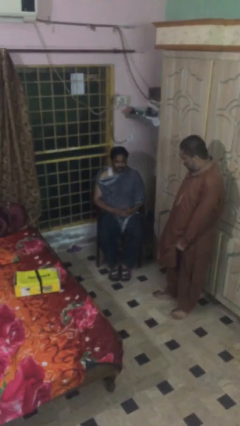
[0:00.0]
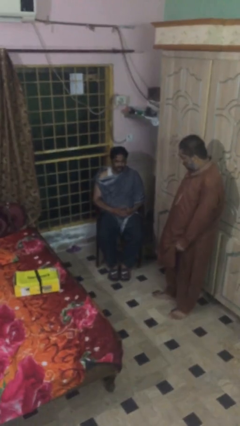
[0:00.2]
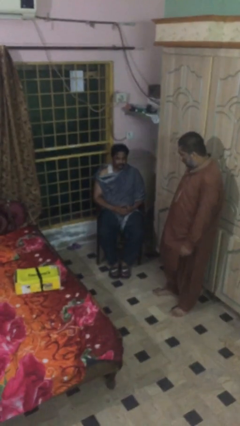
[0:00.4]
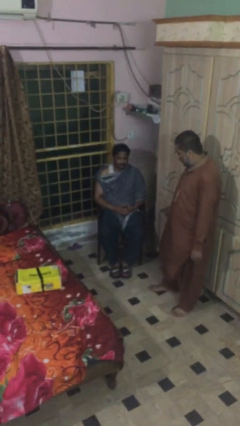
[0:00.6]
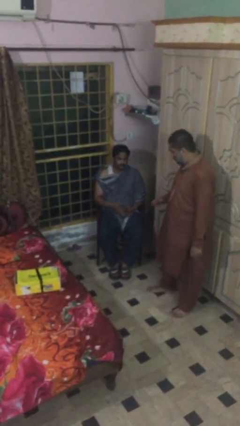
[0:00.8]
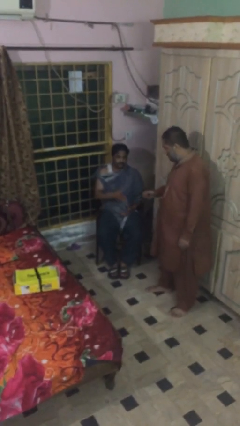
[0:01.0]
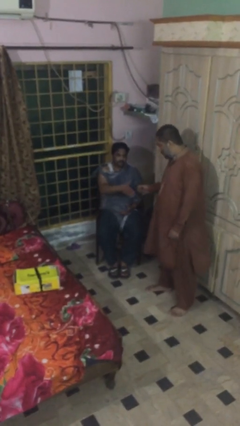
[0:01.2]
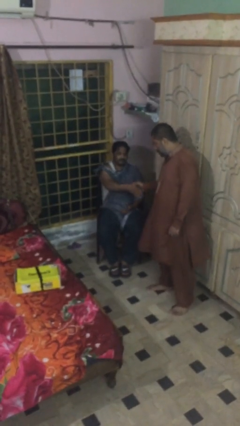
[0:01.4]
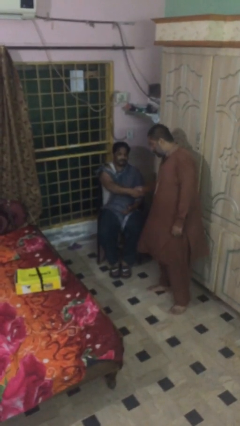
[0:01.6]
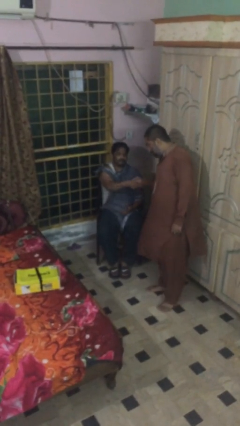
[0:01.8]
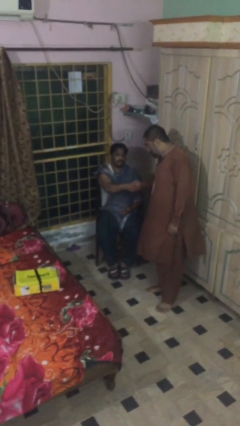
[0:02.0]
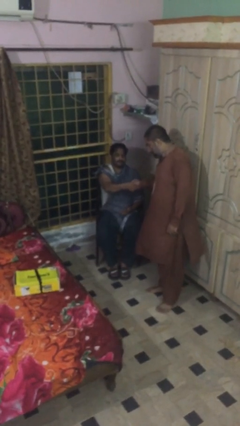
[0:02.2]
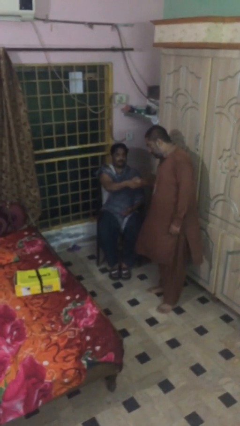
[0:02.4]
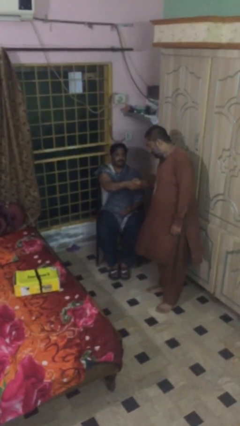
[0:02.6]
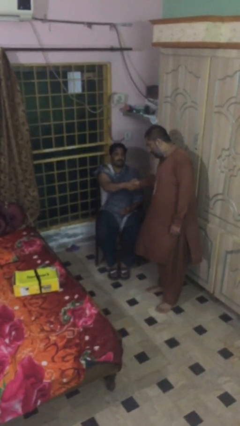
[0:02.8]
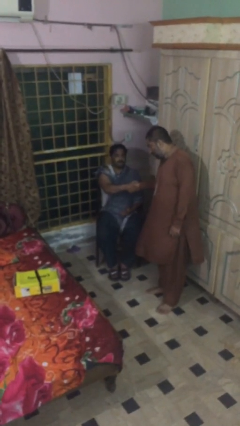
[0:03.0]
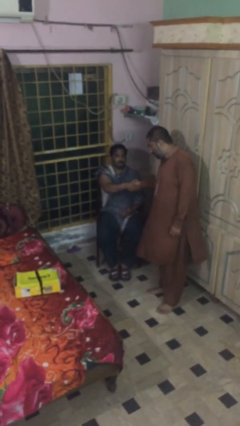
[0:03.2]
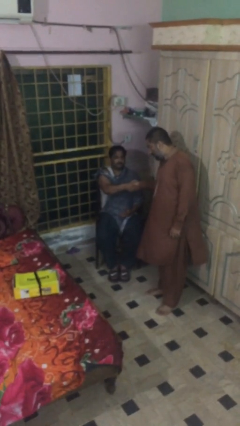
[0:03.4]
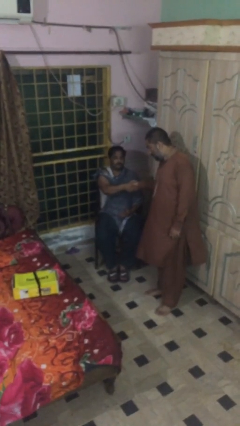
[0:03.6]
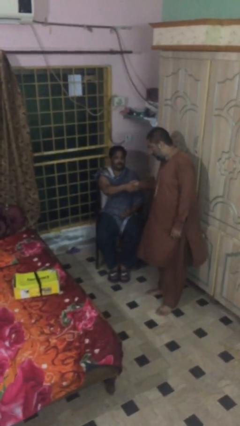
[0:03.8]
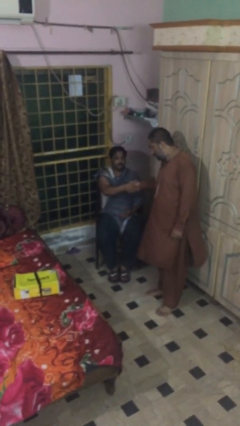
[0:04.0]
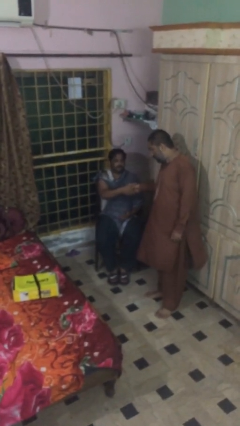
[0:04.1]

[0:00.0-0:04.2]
person shakes hand

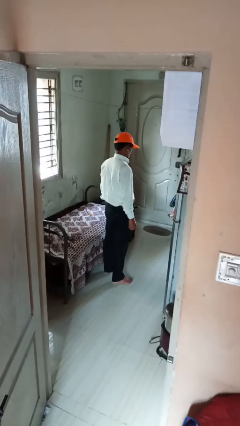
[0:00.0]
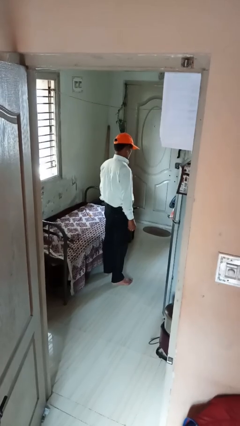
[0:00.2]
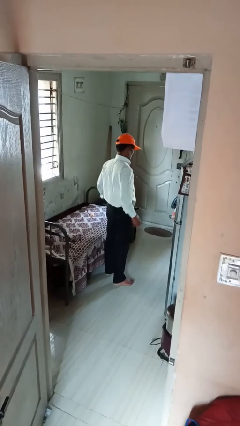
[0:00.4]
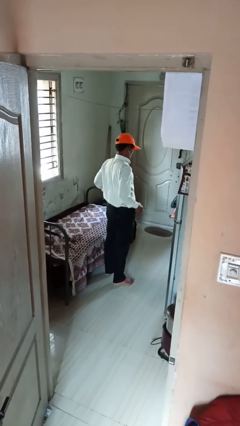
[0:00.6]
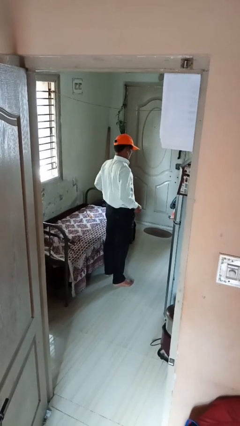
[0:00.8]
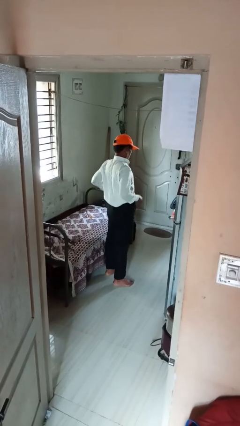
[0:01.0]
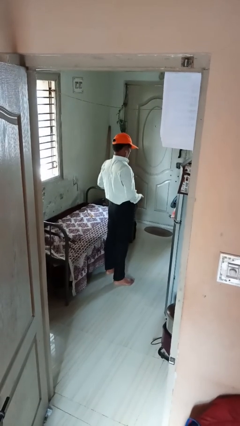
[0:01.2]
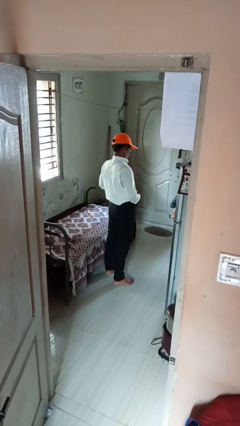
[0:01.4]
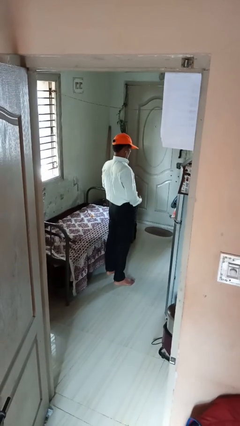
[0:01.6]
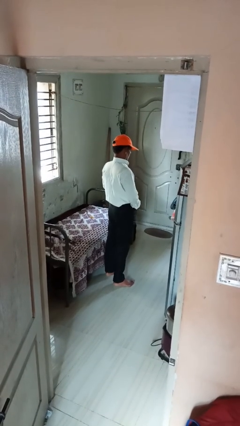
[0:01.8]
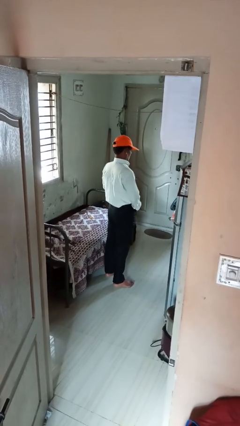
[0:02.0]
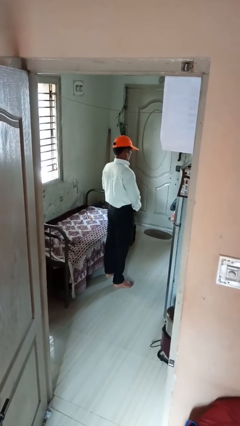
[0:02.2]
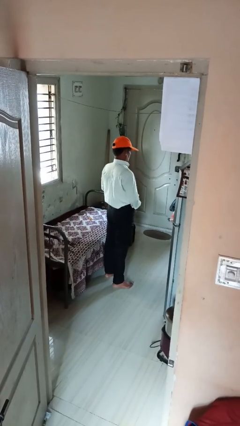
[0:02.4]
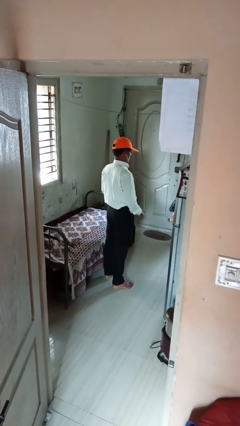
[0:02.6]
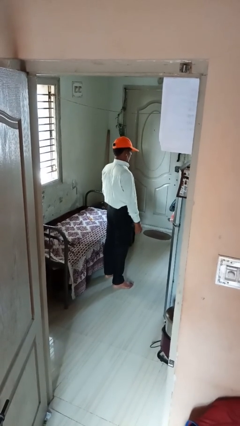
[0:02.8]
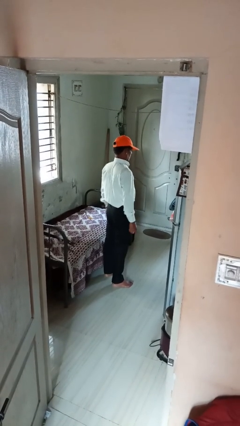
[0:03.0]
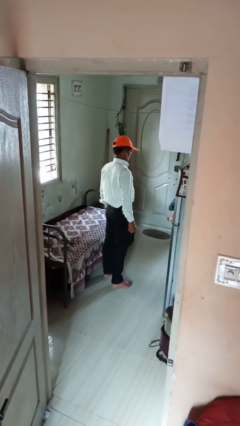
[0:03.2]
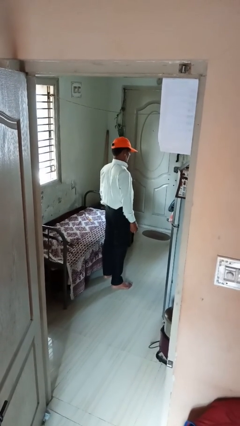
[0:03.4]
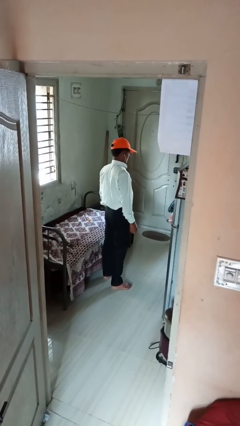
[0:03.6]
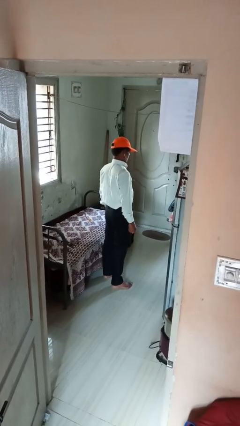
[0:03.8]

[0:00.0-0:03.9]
person hikes up pants

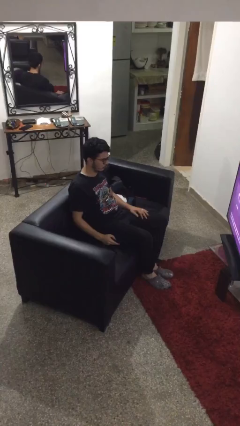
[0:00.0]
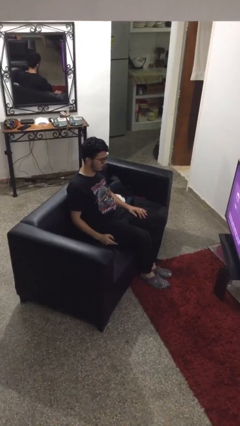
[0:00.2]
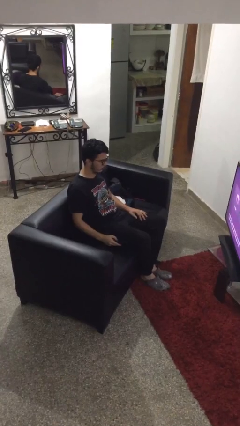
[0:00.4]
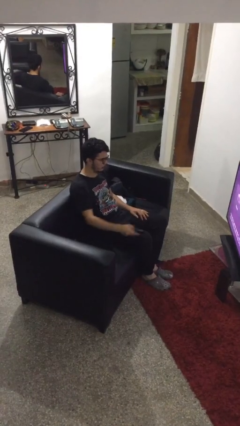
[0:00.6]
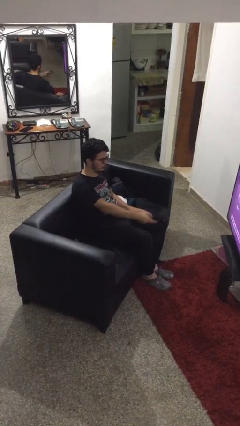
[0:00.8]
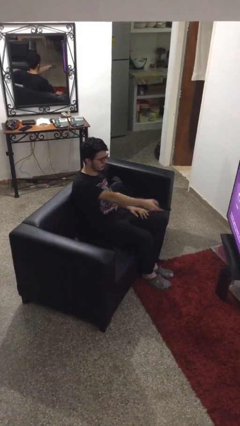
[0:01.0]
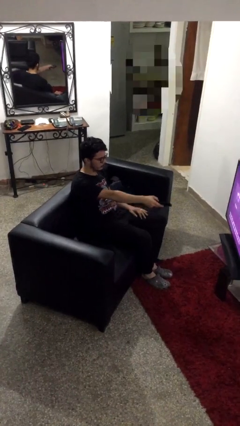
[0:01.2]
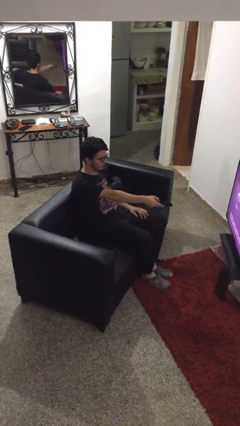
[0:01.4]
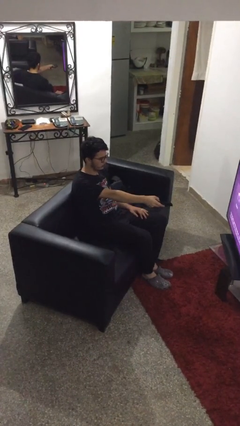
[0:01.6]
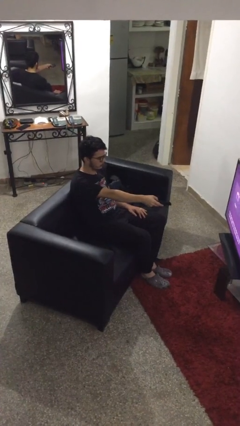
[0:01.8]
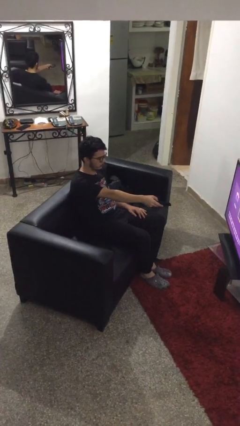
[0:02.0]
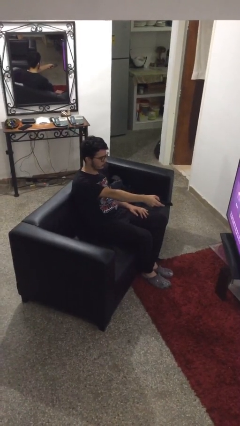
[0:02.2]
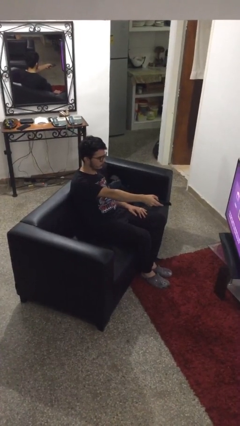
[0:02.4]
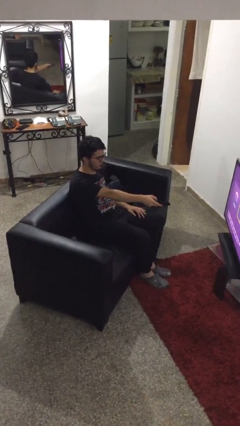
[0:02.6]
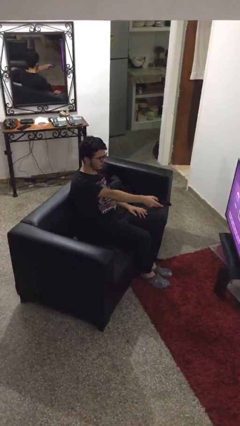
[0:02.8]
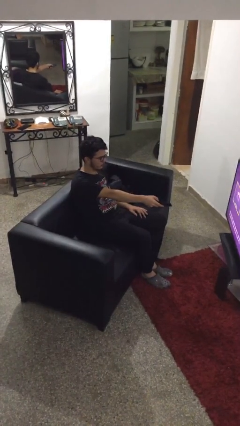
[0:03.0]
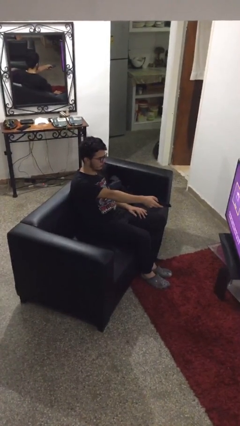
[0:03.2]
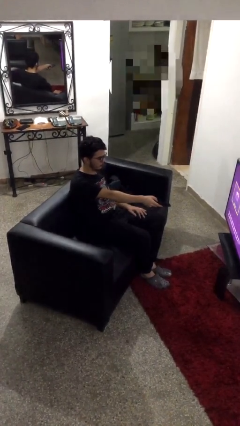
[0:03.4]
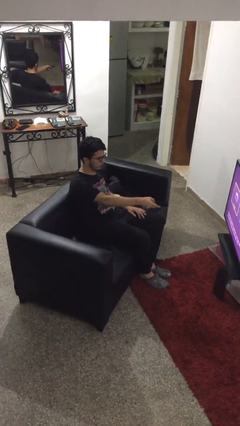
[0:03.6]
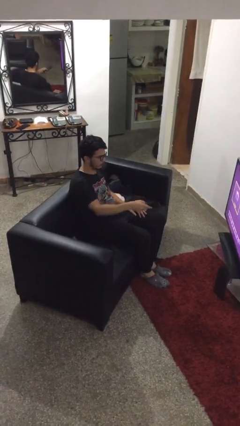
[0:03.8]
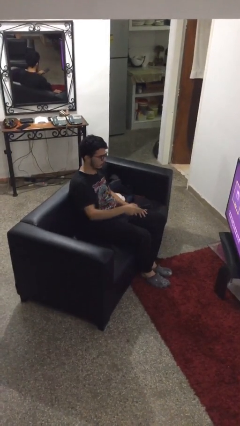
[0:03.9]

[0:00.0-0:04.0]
person uses television remote

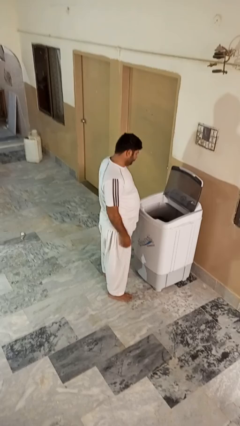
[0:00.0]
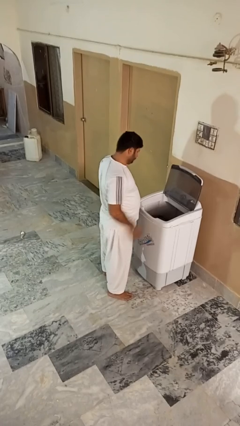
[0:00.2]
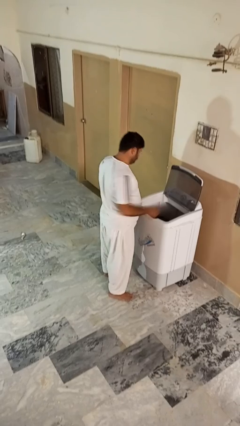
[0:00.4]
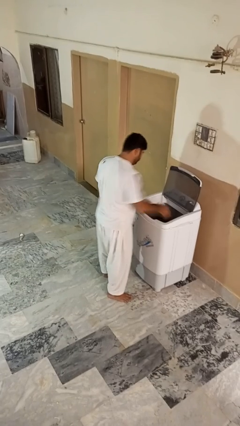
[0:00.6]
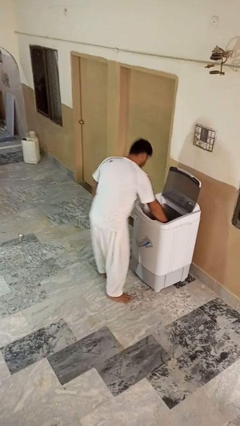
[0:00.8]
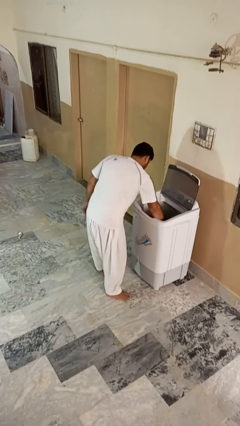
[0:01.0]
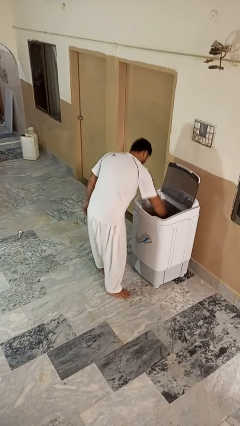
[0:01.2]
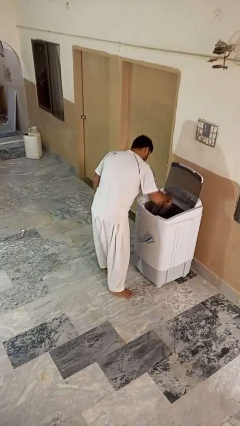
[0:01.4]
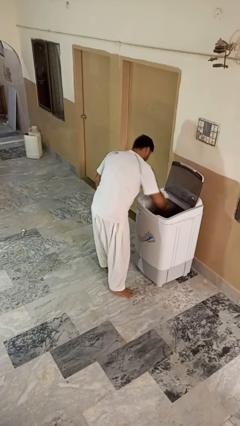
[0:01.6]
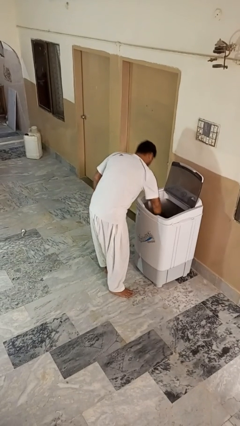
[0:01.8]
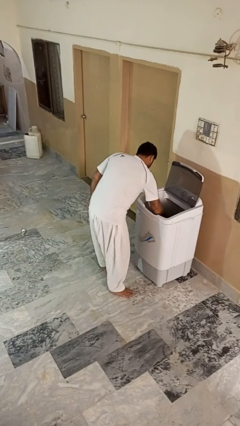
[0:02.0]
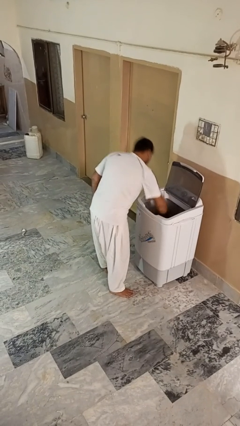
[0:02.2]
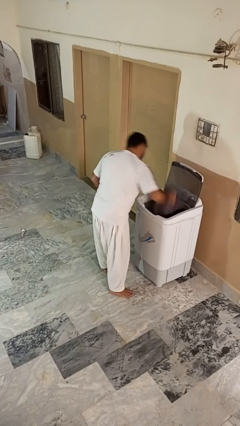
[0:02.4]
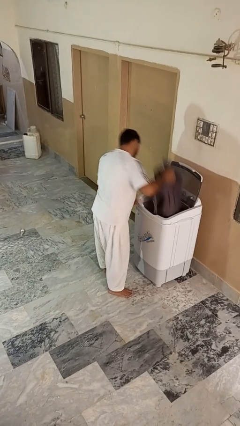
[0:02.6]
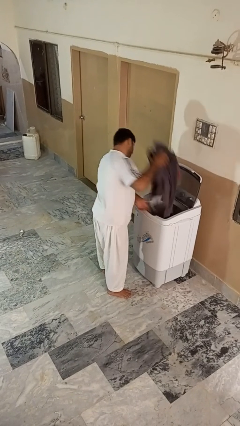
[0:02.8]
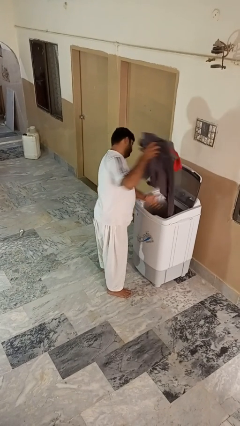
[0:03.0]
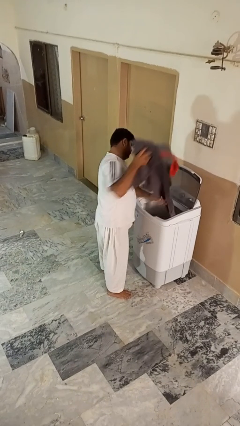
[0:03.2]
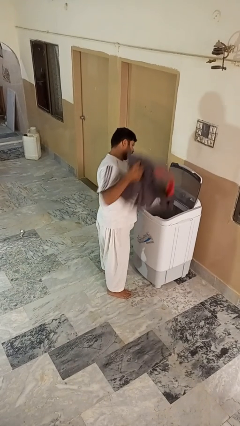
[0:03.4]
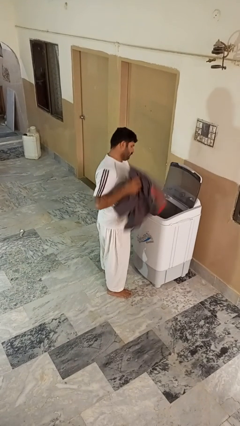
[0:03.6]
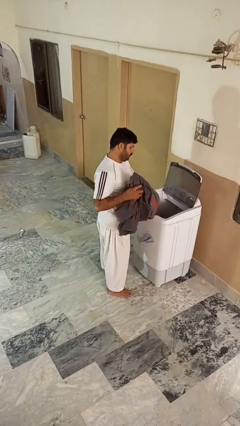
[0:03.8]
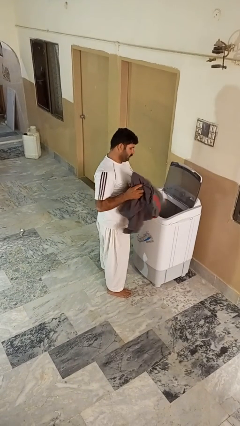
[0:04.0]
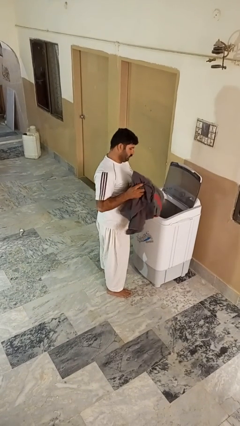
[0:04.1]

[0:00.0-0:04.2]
person unloads clotheswasher

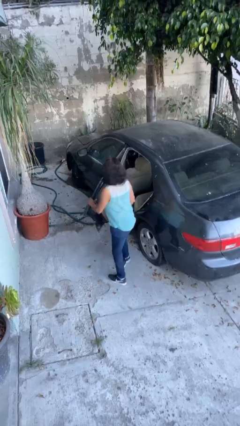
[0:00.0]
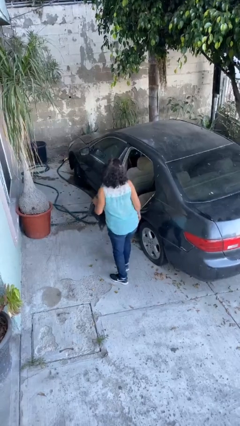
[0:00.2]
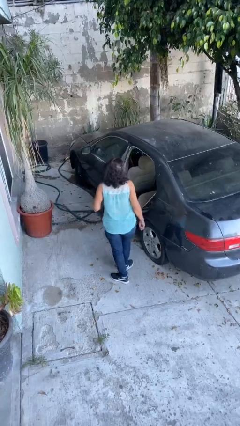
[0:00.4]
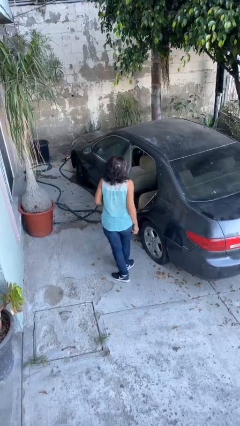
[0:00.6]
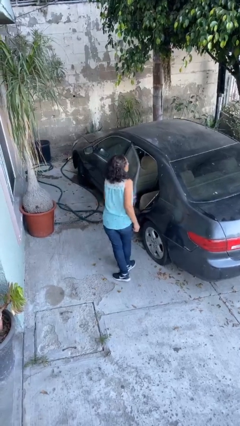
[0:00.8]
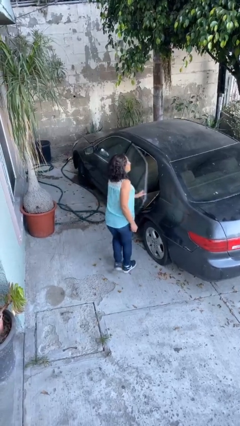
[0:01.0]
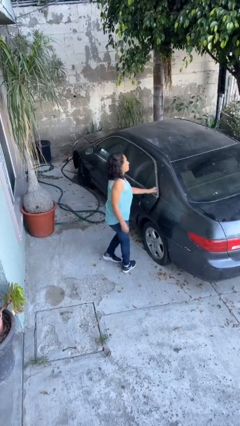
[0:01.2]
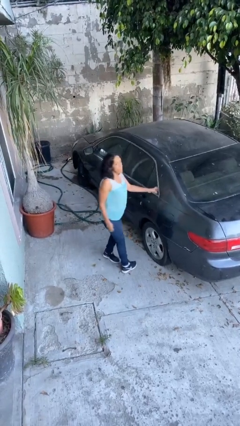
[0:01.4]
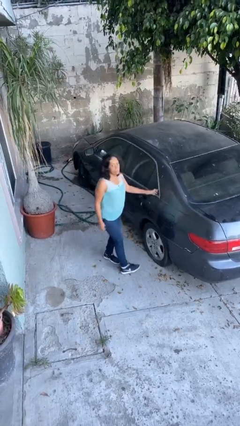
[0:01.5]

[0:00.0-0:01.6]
person closes car door
